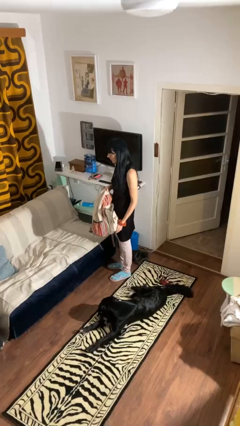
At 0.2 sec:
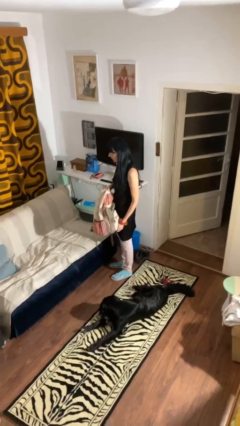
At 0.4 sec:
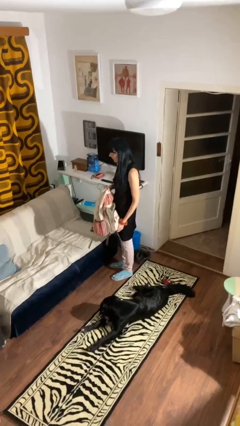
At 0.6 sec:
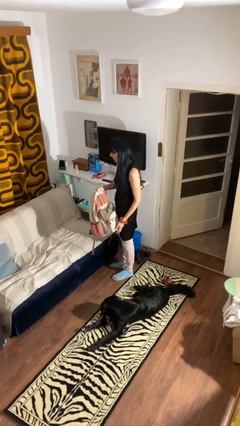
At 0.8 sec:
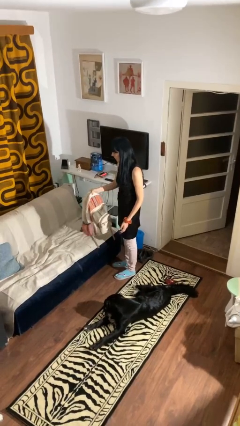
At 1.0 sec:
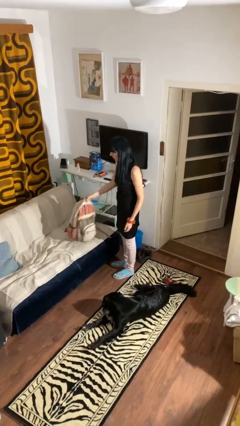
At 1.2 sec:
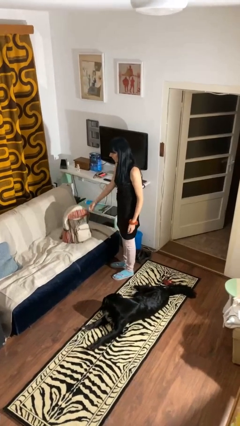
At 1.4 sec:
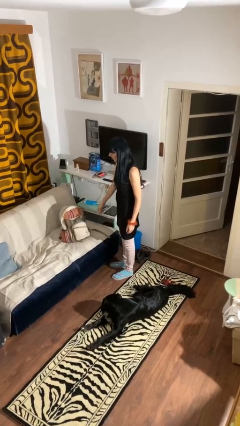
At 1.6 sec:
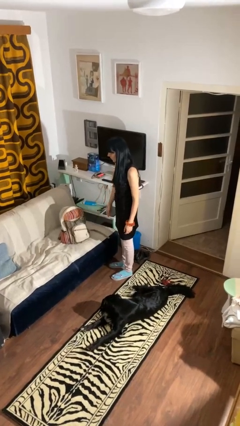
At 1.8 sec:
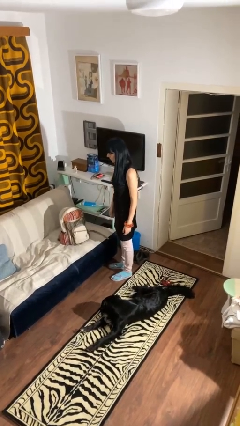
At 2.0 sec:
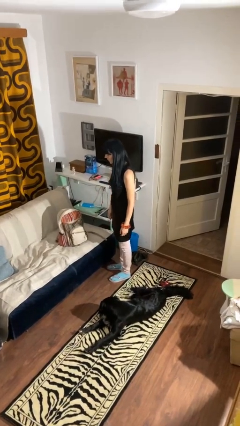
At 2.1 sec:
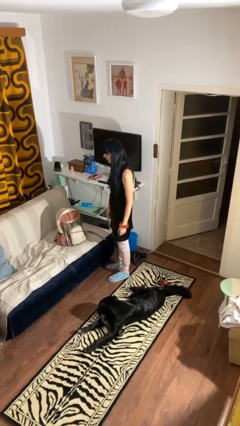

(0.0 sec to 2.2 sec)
person puts down object on couch

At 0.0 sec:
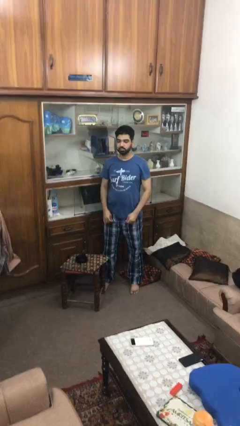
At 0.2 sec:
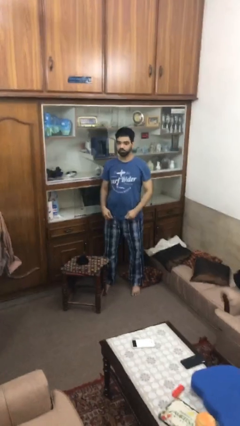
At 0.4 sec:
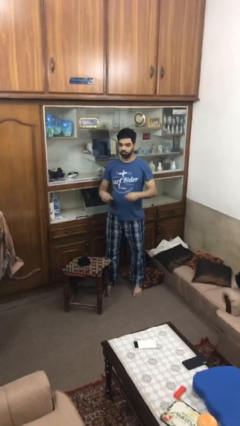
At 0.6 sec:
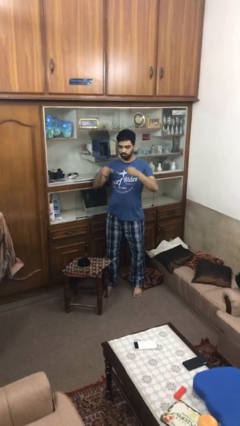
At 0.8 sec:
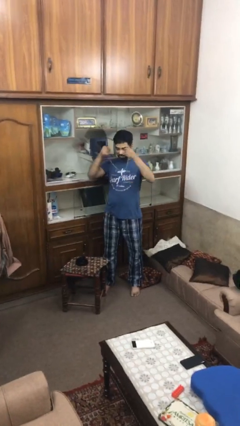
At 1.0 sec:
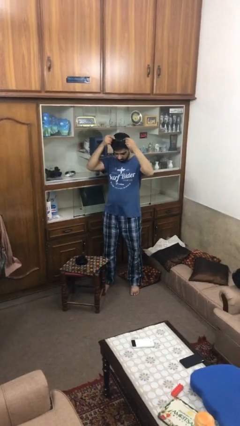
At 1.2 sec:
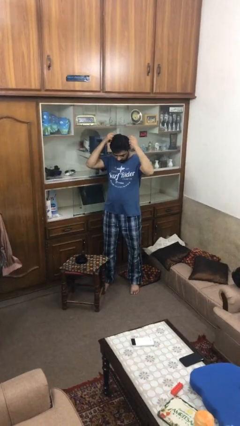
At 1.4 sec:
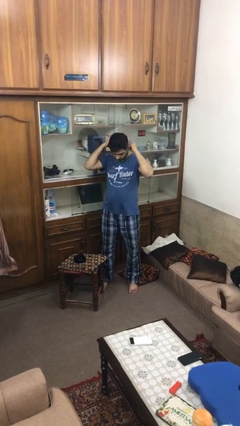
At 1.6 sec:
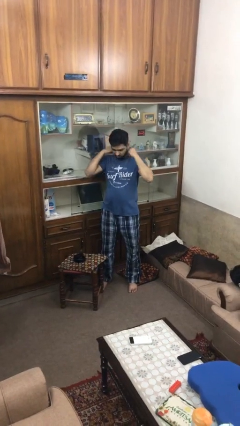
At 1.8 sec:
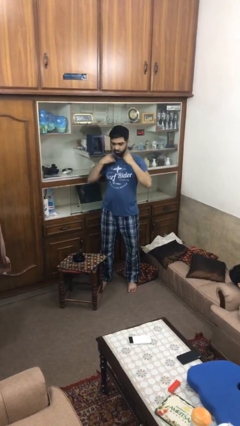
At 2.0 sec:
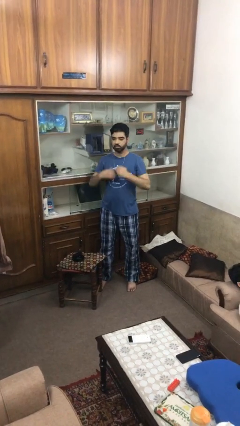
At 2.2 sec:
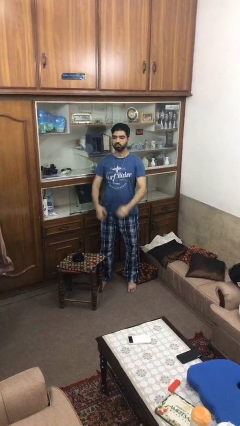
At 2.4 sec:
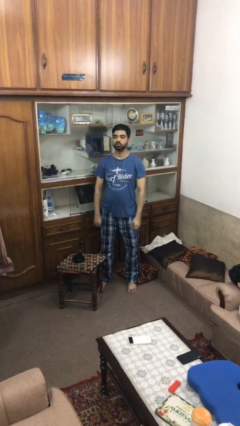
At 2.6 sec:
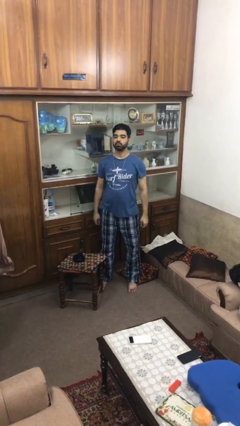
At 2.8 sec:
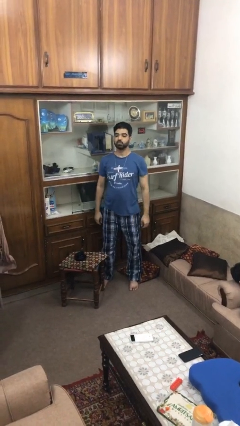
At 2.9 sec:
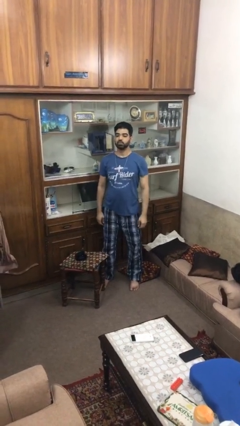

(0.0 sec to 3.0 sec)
person puts on necklace

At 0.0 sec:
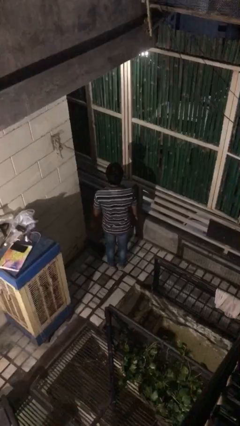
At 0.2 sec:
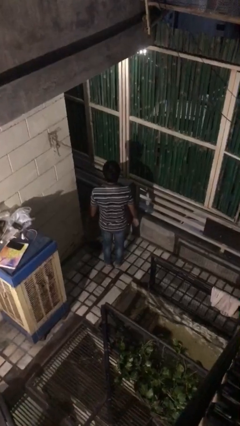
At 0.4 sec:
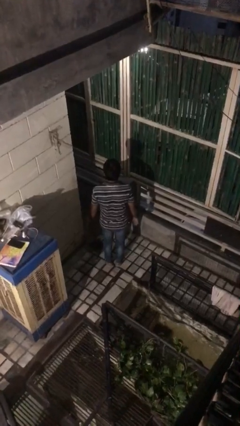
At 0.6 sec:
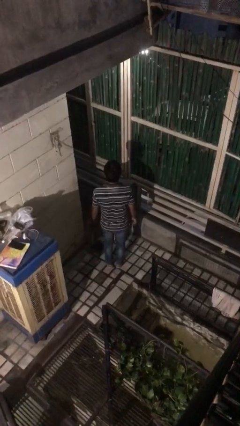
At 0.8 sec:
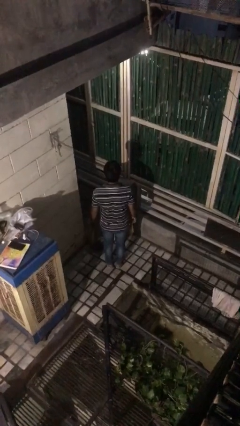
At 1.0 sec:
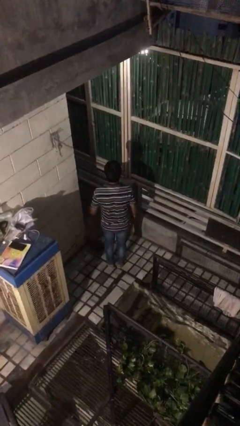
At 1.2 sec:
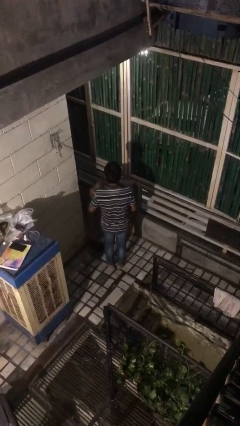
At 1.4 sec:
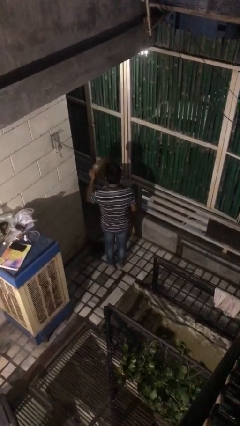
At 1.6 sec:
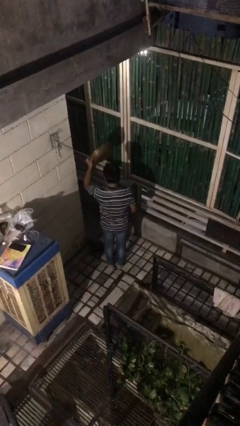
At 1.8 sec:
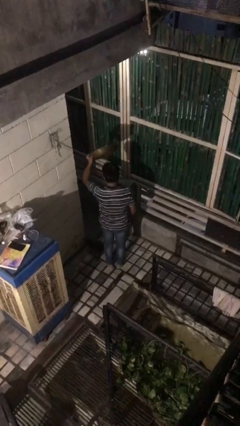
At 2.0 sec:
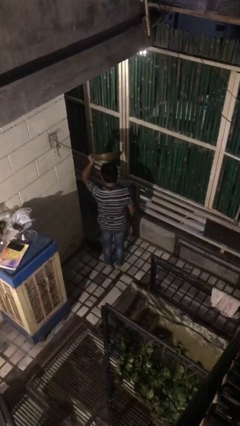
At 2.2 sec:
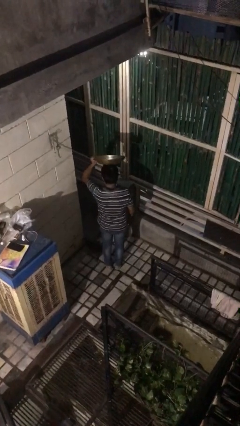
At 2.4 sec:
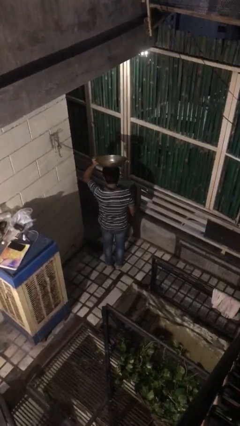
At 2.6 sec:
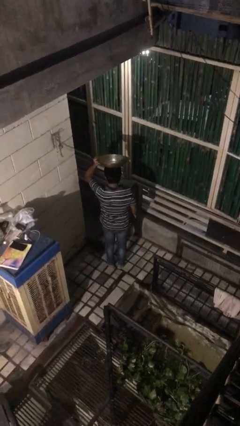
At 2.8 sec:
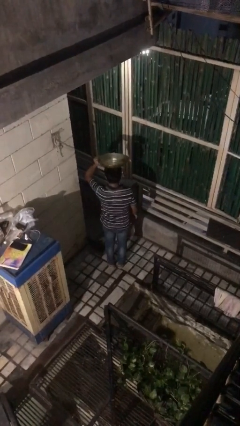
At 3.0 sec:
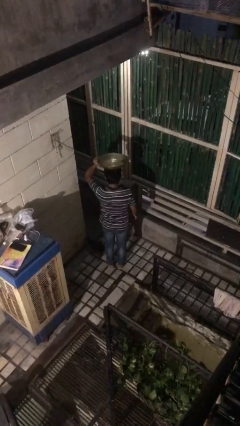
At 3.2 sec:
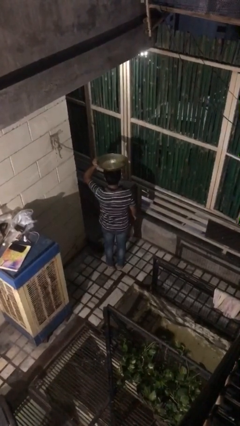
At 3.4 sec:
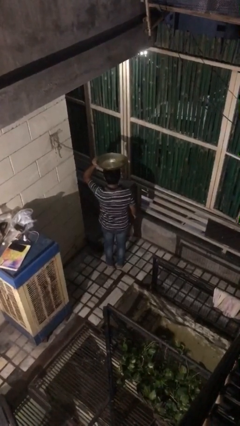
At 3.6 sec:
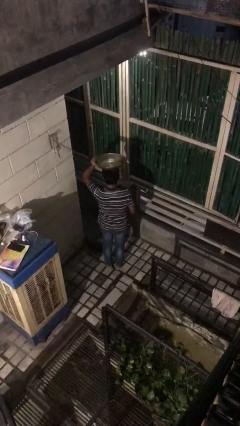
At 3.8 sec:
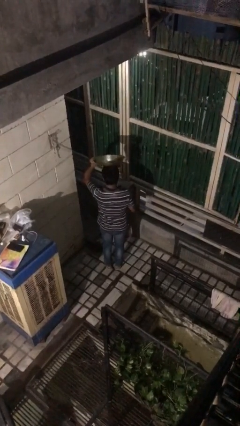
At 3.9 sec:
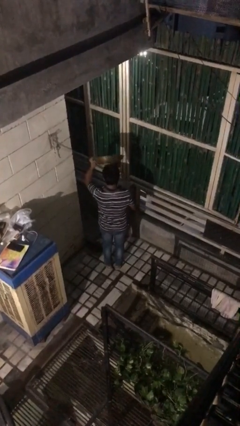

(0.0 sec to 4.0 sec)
person holds object above head

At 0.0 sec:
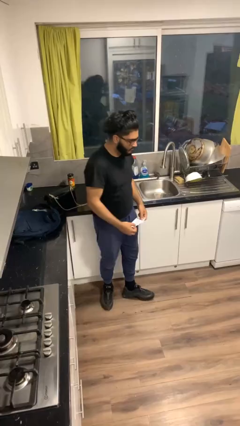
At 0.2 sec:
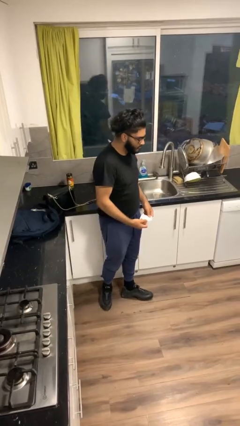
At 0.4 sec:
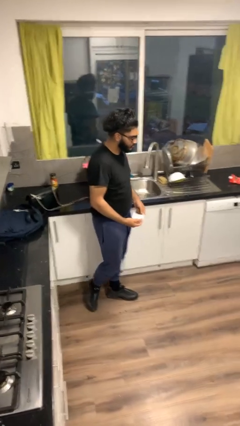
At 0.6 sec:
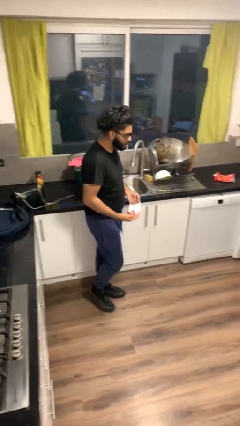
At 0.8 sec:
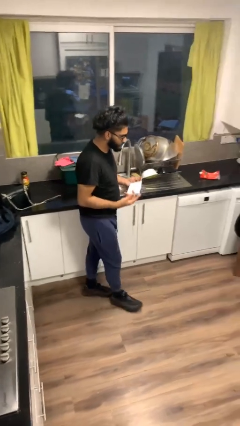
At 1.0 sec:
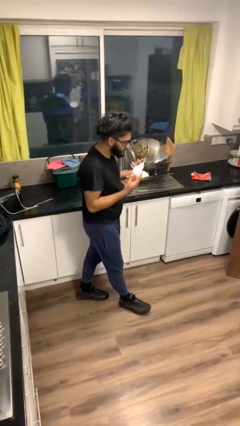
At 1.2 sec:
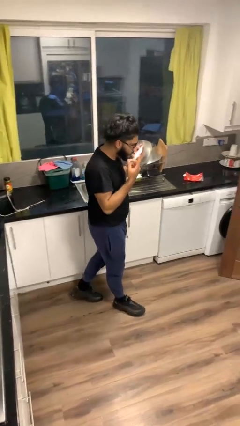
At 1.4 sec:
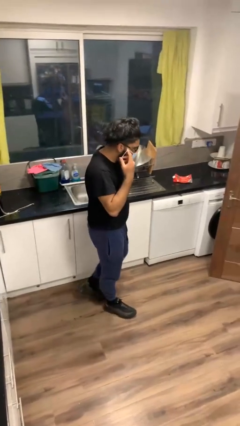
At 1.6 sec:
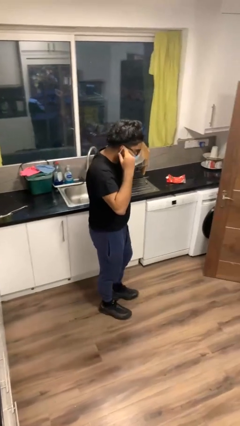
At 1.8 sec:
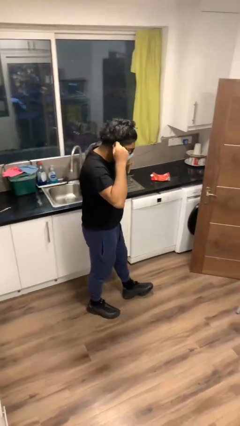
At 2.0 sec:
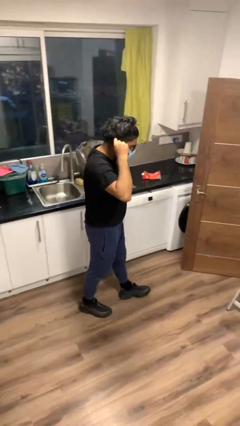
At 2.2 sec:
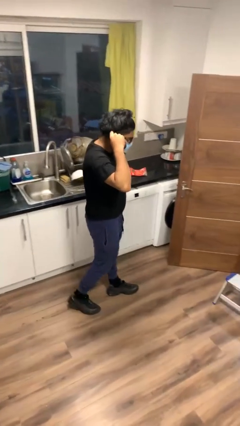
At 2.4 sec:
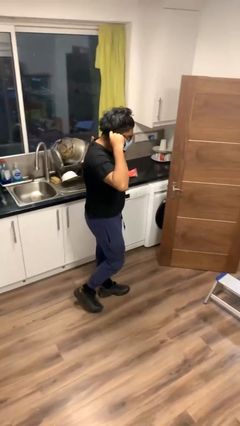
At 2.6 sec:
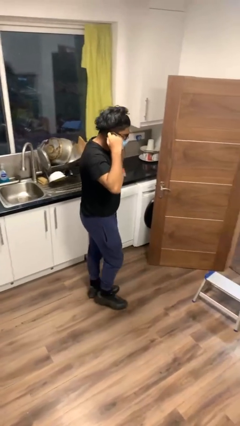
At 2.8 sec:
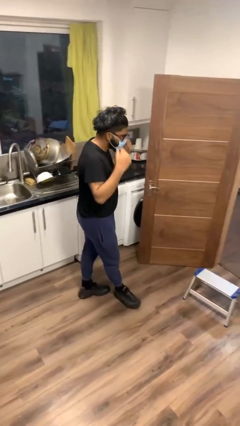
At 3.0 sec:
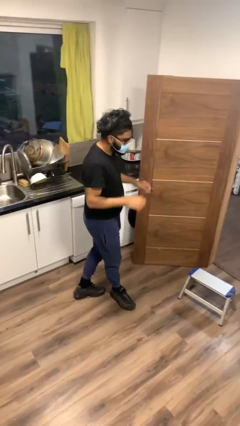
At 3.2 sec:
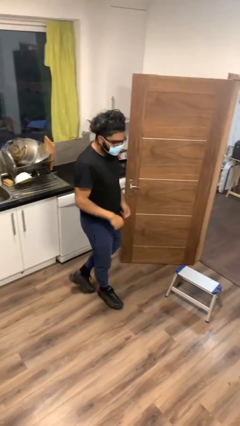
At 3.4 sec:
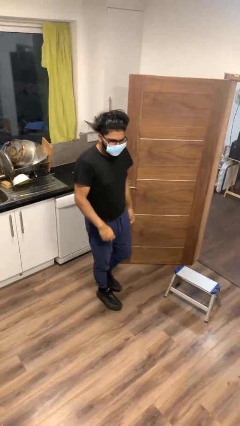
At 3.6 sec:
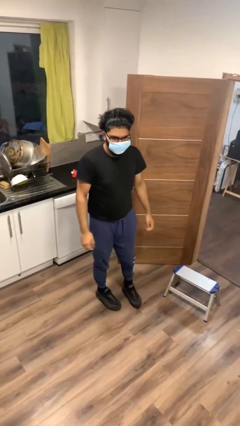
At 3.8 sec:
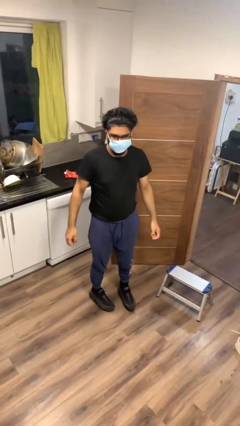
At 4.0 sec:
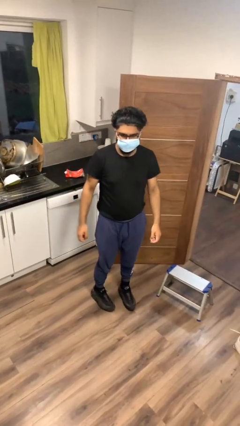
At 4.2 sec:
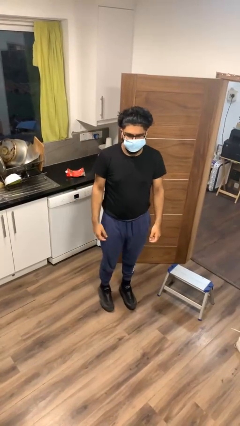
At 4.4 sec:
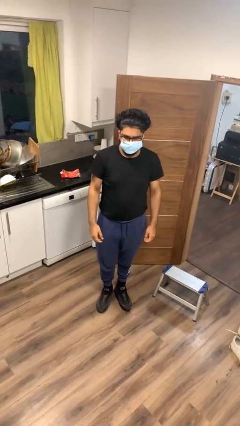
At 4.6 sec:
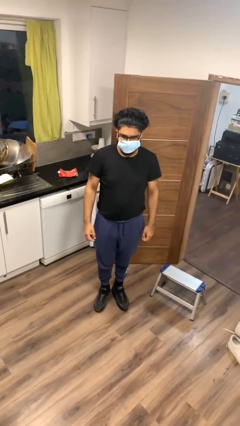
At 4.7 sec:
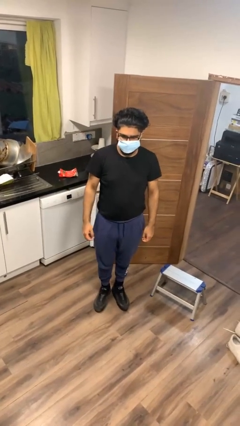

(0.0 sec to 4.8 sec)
person puts on facemask

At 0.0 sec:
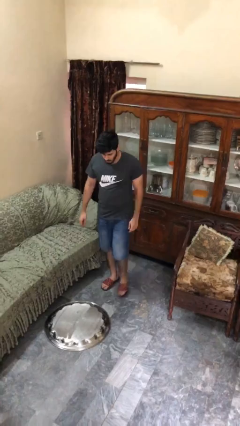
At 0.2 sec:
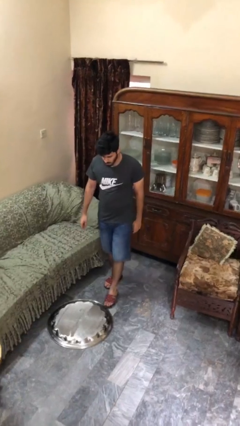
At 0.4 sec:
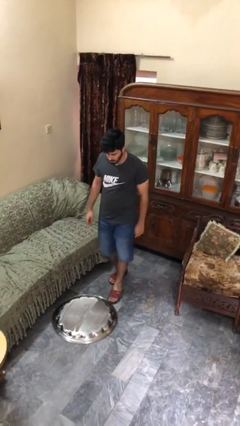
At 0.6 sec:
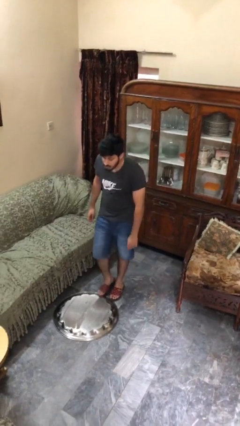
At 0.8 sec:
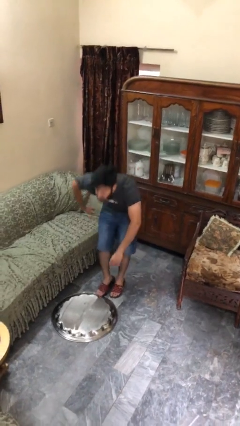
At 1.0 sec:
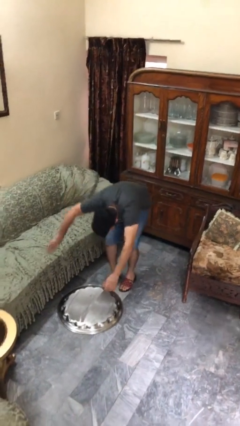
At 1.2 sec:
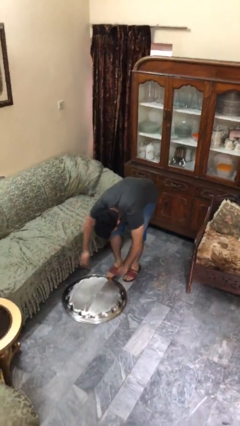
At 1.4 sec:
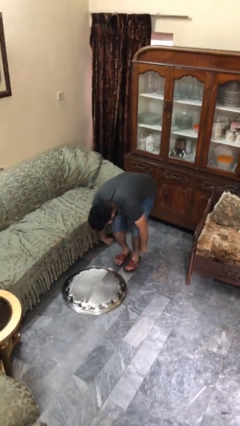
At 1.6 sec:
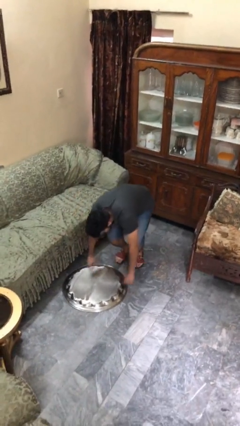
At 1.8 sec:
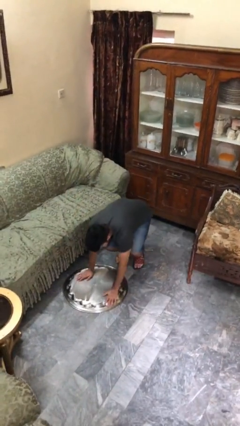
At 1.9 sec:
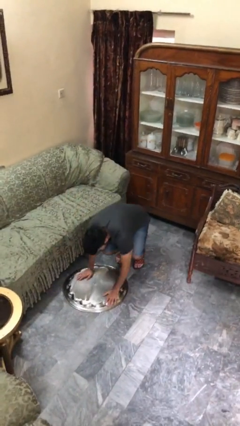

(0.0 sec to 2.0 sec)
person trips on object on floor

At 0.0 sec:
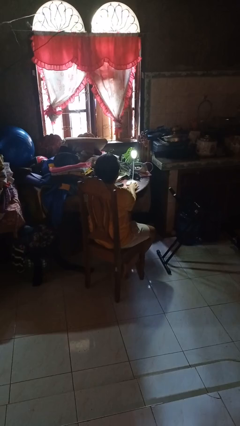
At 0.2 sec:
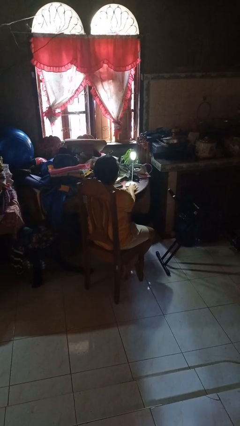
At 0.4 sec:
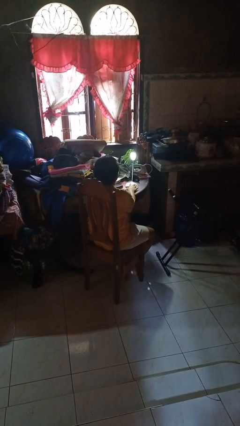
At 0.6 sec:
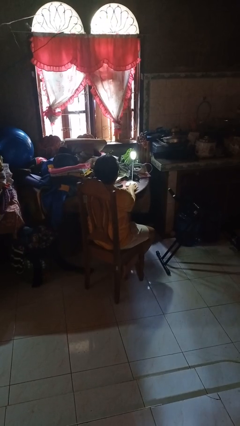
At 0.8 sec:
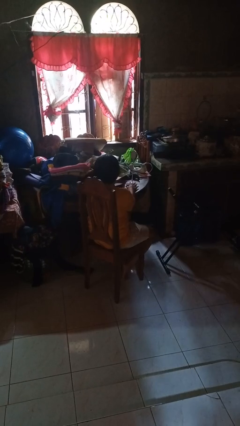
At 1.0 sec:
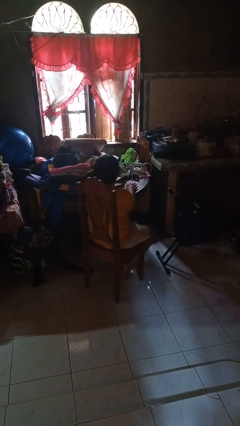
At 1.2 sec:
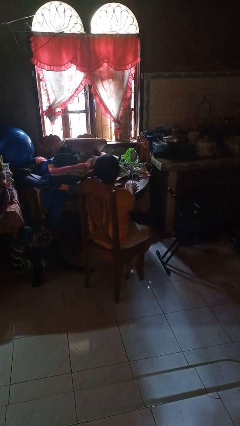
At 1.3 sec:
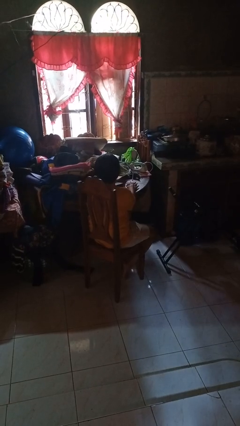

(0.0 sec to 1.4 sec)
person turns off lamp
